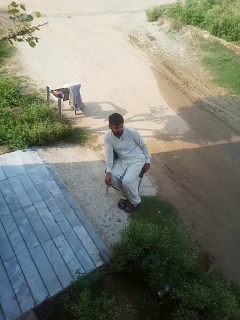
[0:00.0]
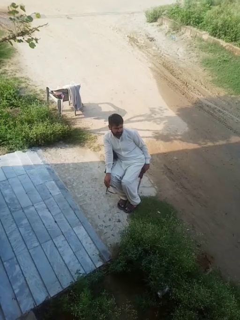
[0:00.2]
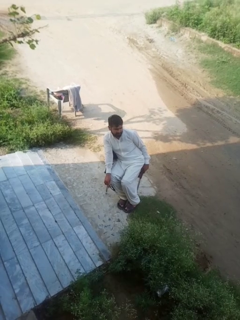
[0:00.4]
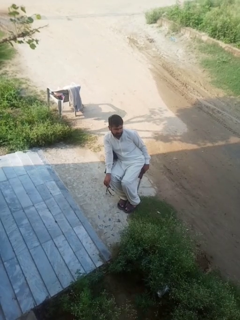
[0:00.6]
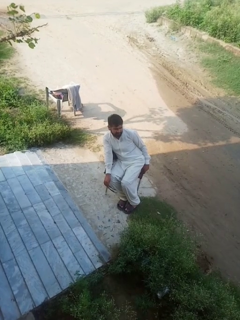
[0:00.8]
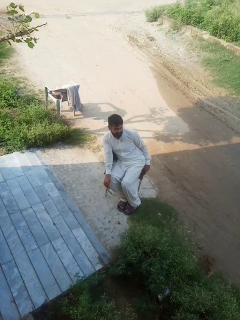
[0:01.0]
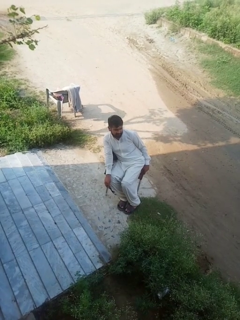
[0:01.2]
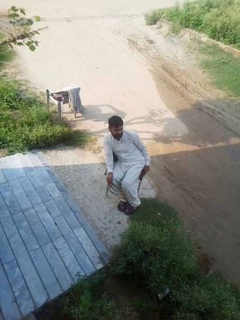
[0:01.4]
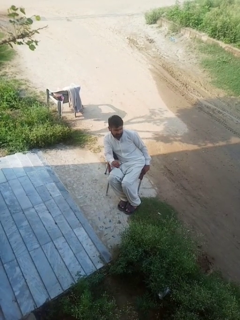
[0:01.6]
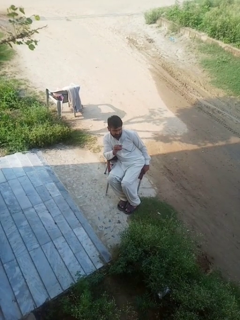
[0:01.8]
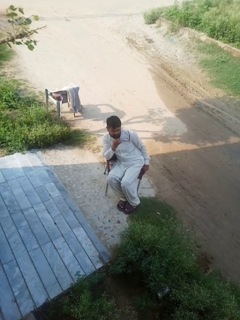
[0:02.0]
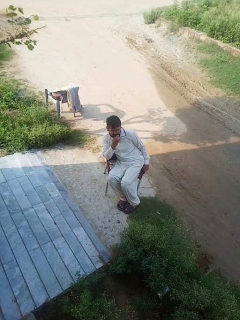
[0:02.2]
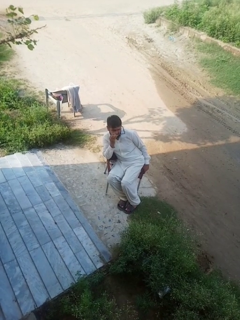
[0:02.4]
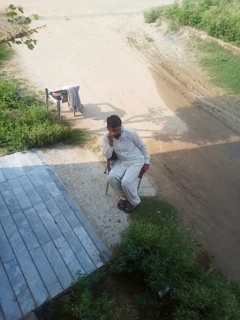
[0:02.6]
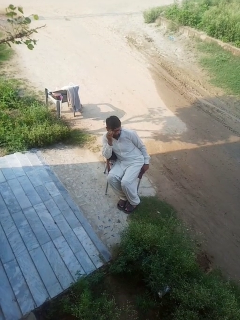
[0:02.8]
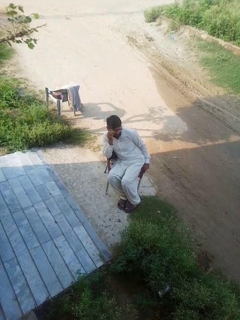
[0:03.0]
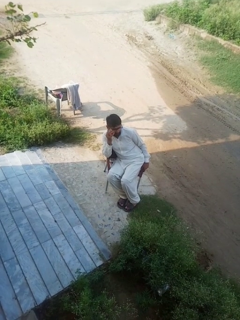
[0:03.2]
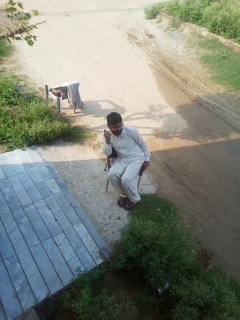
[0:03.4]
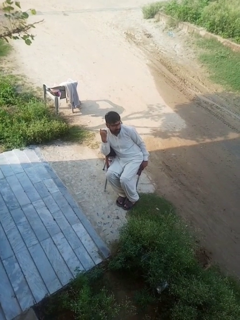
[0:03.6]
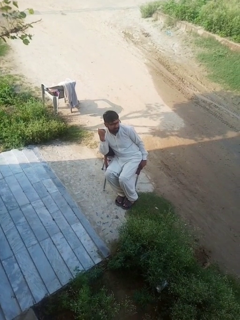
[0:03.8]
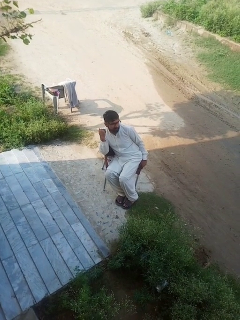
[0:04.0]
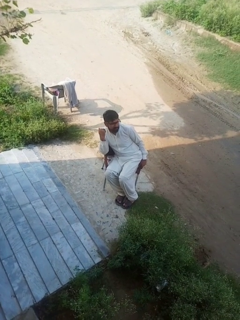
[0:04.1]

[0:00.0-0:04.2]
person puts on glasses

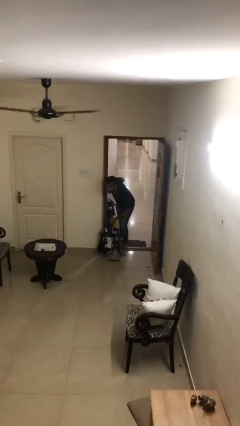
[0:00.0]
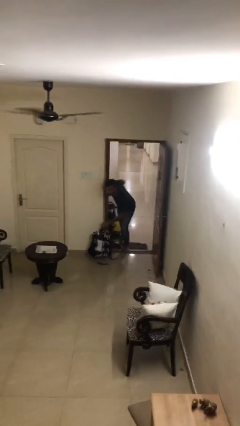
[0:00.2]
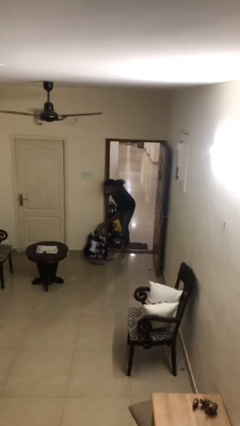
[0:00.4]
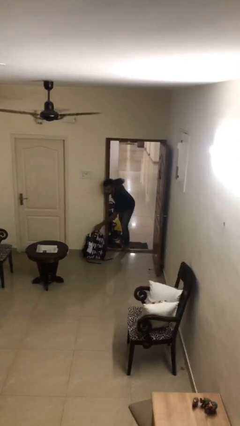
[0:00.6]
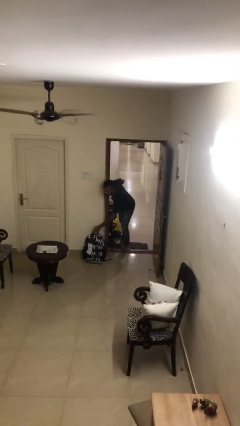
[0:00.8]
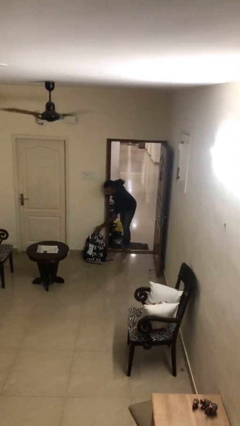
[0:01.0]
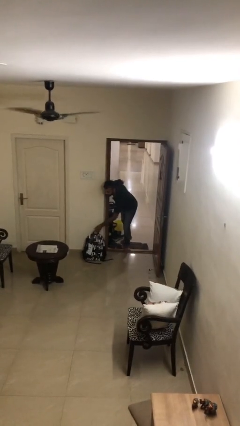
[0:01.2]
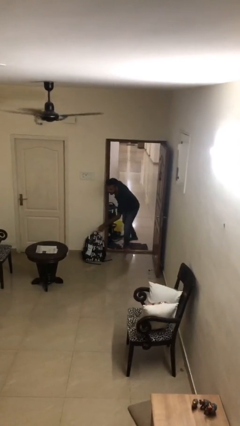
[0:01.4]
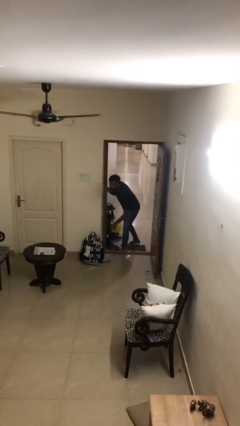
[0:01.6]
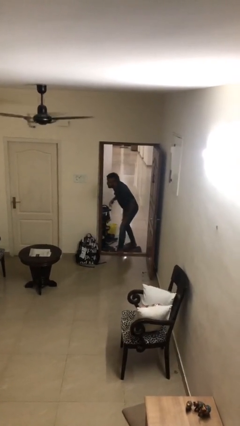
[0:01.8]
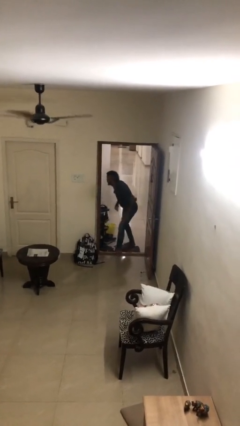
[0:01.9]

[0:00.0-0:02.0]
person puts down object on floor

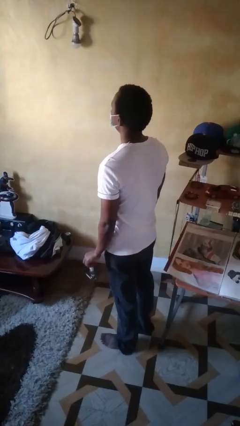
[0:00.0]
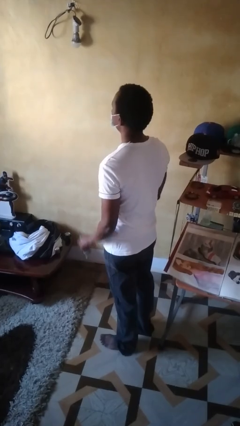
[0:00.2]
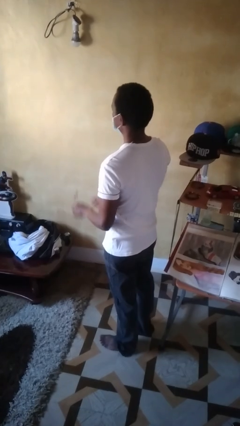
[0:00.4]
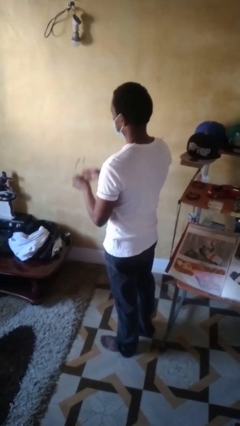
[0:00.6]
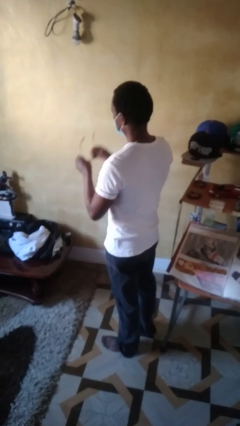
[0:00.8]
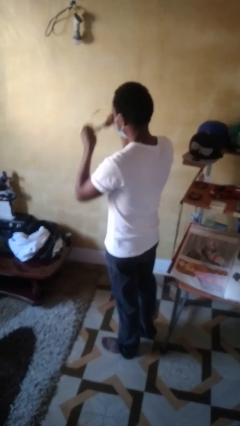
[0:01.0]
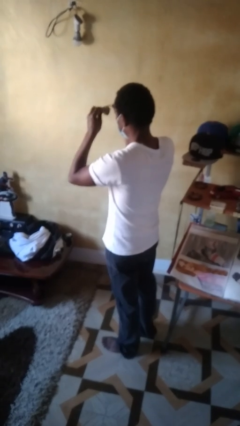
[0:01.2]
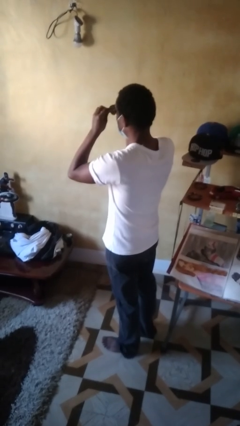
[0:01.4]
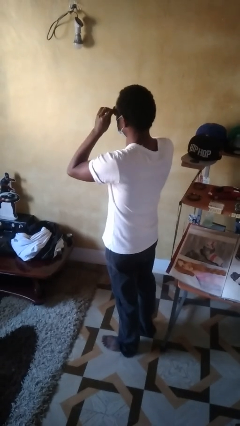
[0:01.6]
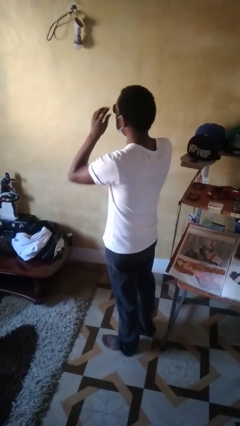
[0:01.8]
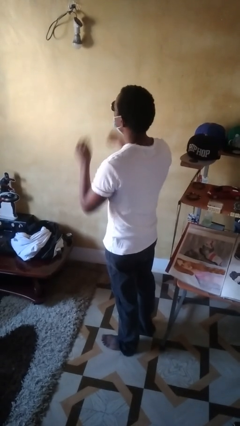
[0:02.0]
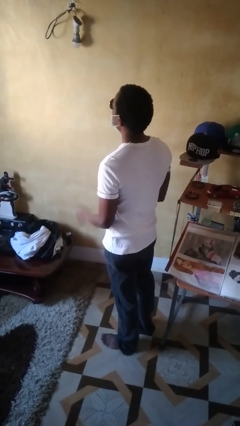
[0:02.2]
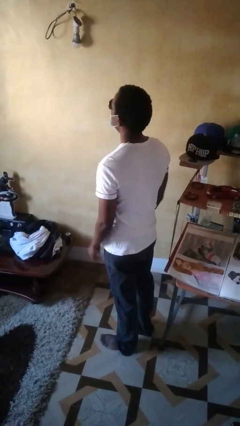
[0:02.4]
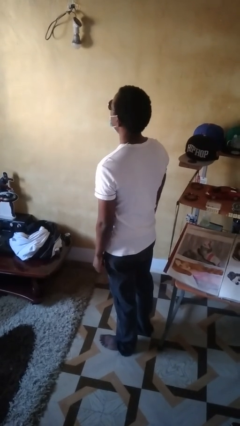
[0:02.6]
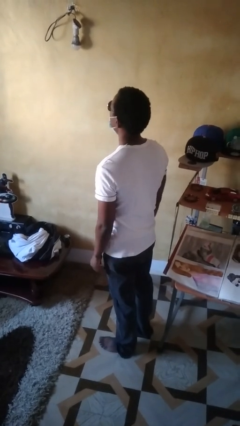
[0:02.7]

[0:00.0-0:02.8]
person puts on sunglasses

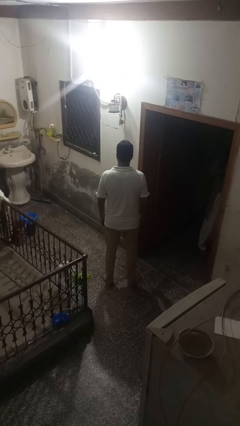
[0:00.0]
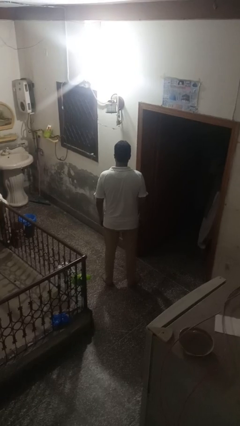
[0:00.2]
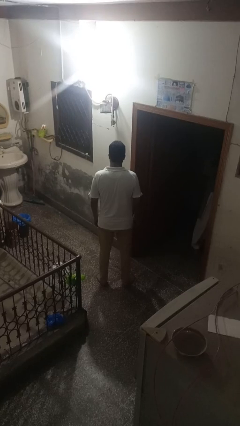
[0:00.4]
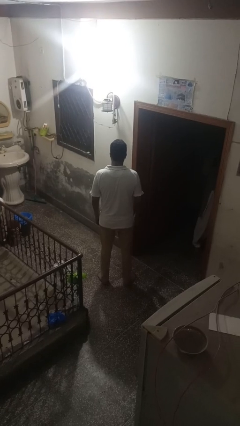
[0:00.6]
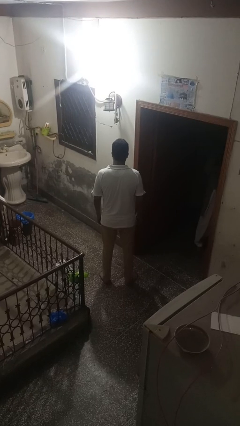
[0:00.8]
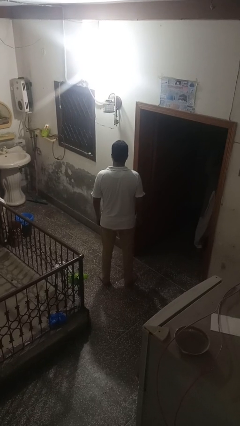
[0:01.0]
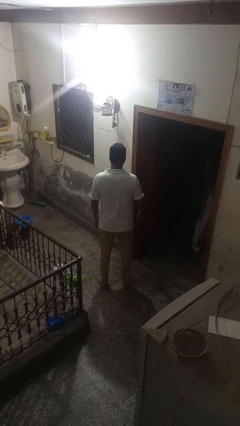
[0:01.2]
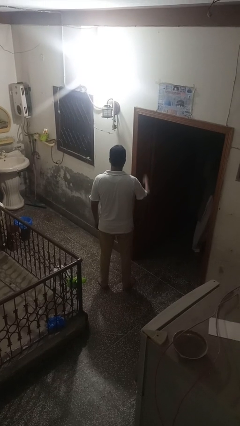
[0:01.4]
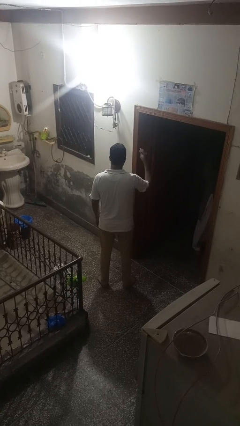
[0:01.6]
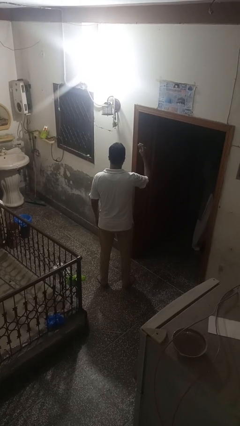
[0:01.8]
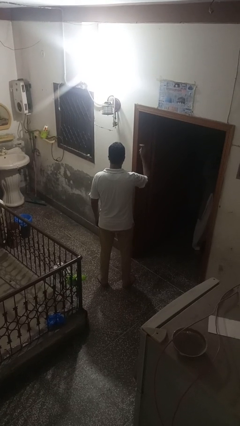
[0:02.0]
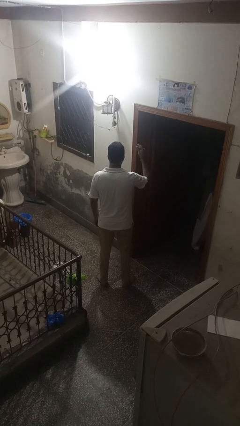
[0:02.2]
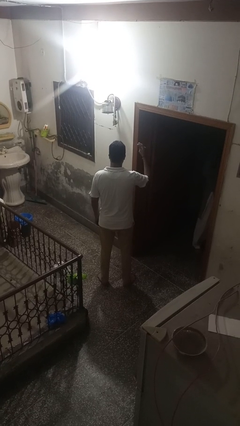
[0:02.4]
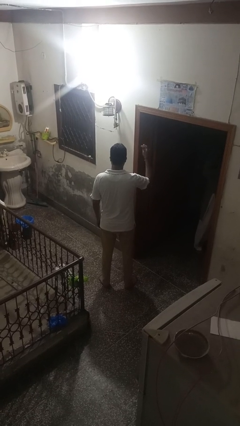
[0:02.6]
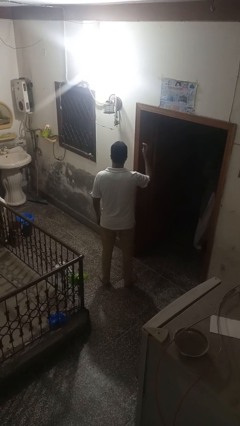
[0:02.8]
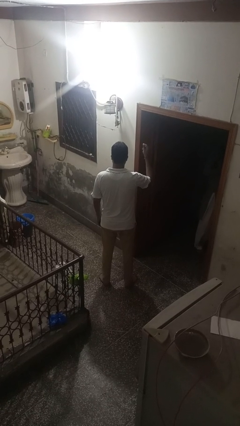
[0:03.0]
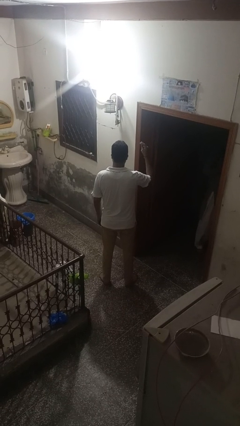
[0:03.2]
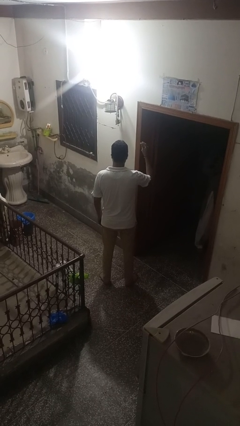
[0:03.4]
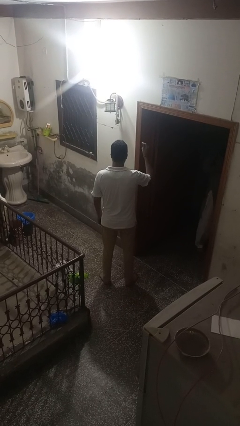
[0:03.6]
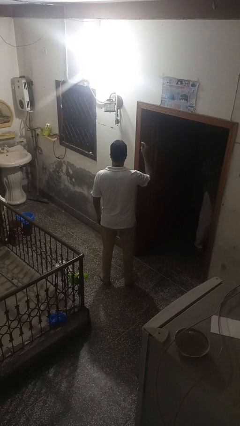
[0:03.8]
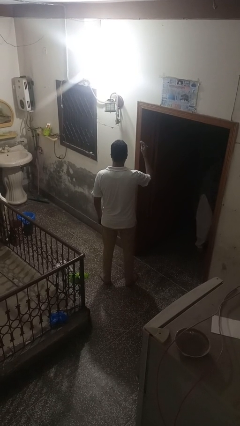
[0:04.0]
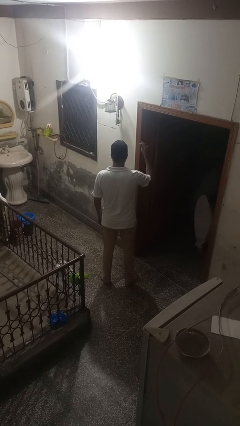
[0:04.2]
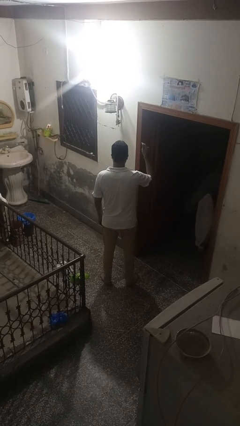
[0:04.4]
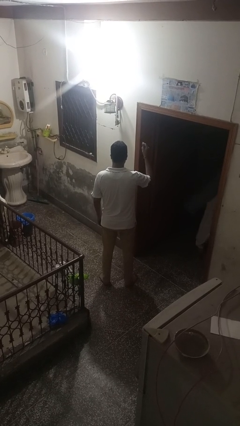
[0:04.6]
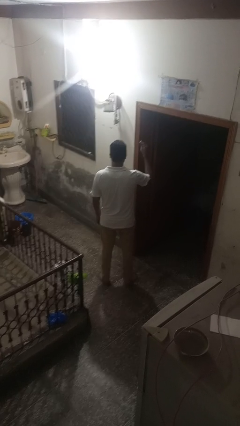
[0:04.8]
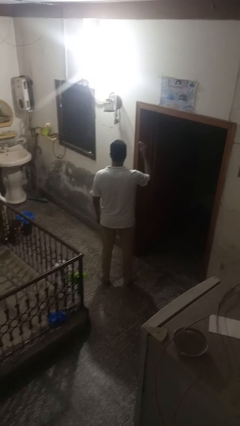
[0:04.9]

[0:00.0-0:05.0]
person snaps fingers

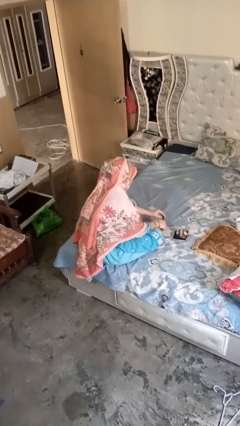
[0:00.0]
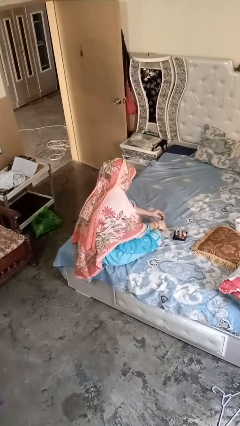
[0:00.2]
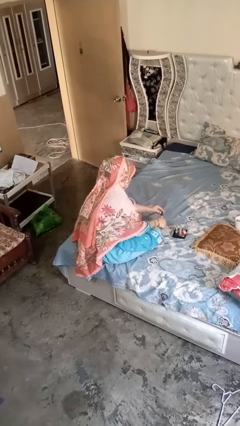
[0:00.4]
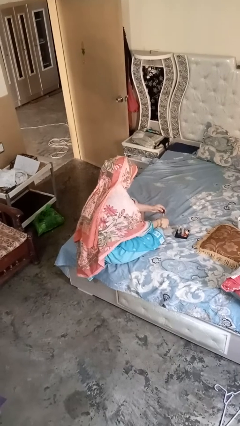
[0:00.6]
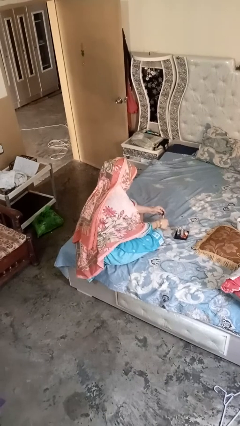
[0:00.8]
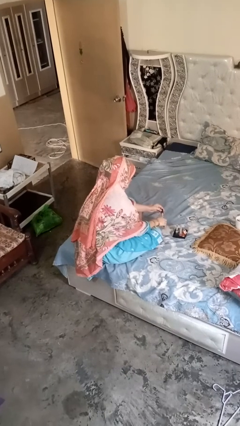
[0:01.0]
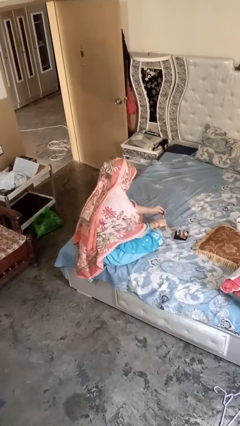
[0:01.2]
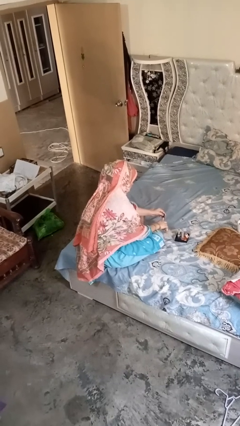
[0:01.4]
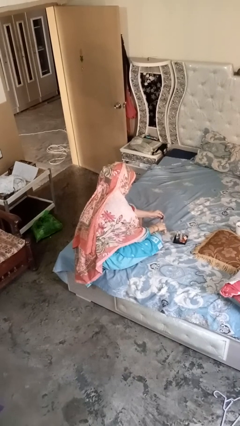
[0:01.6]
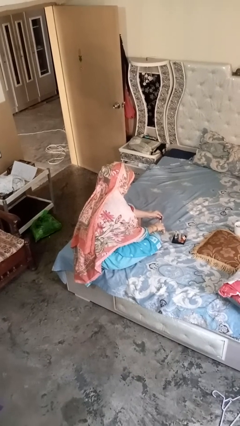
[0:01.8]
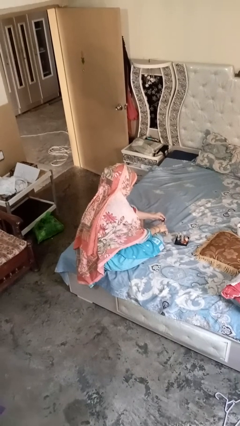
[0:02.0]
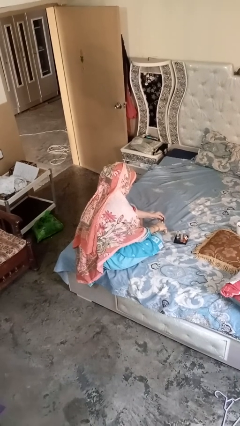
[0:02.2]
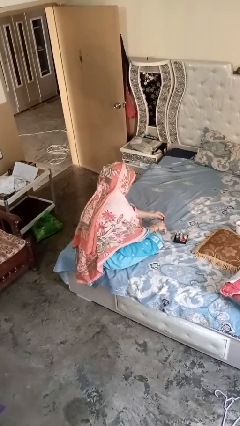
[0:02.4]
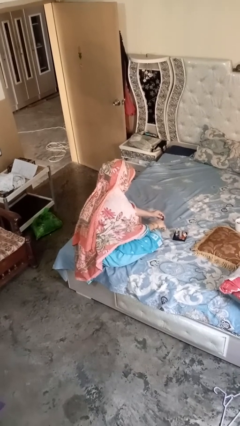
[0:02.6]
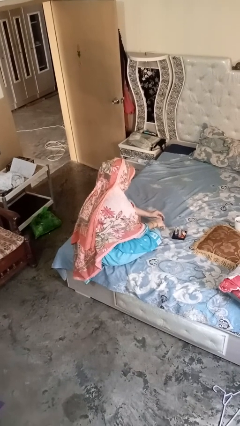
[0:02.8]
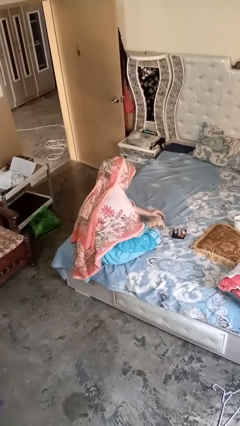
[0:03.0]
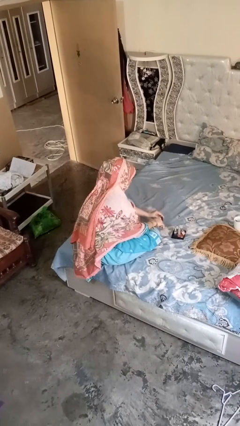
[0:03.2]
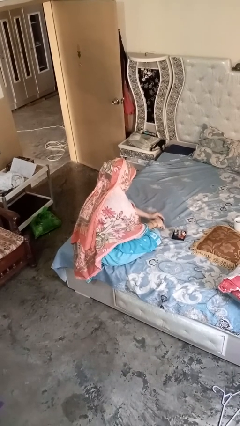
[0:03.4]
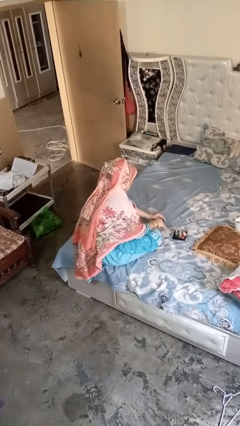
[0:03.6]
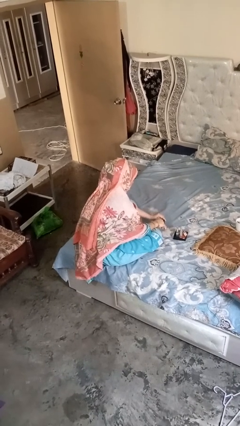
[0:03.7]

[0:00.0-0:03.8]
person paints fingernails

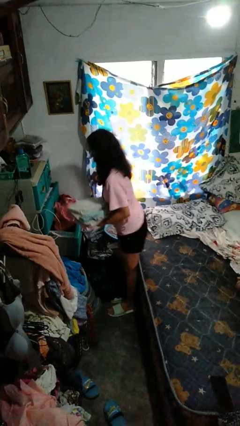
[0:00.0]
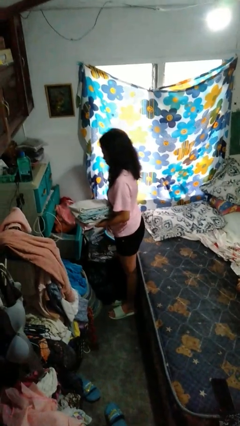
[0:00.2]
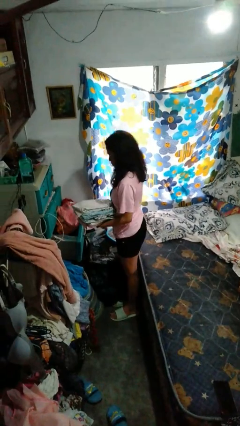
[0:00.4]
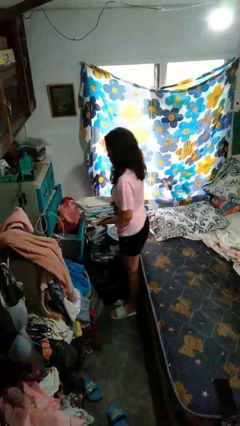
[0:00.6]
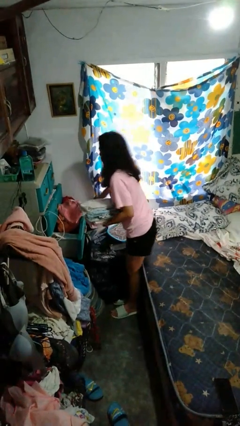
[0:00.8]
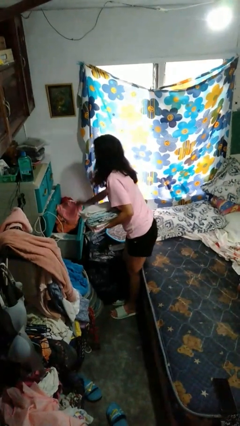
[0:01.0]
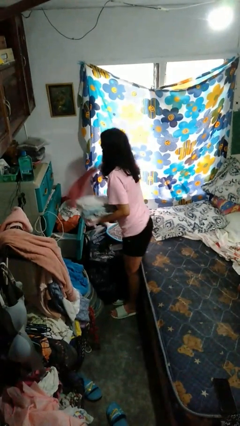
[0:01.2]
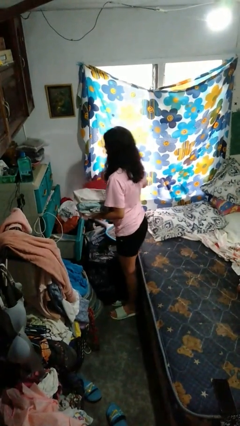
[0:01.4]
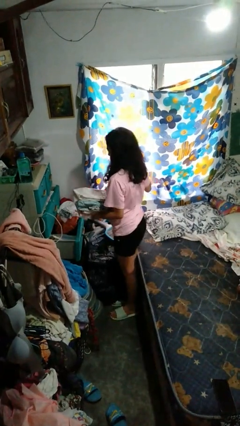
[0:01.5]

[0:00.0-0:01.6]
person takes clothes from dresser
